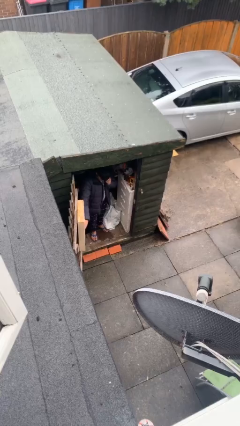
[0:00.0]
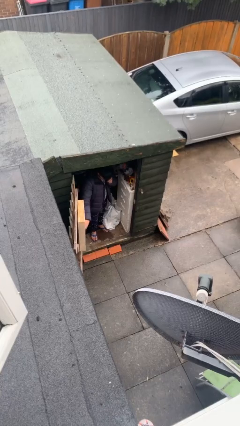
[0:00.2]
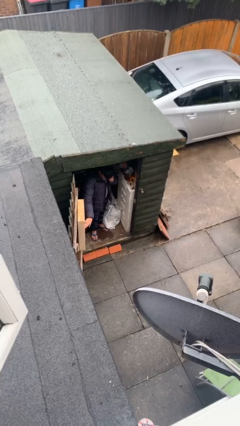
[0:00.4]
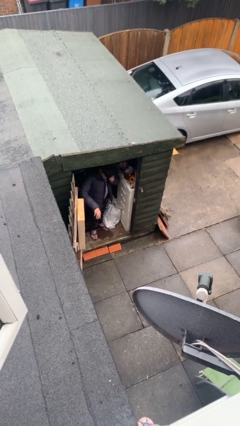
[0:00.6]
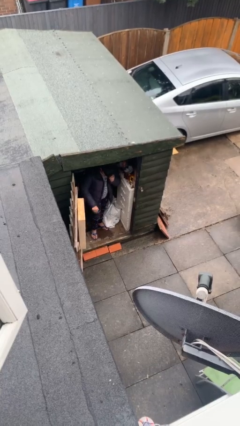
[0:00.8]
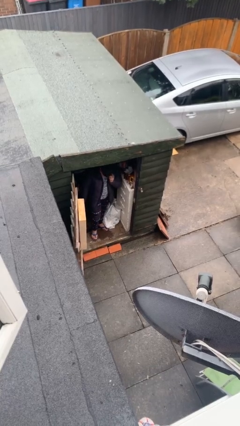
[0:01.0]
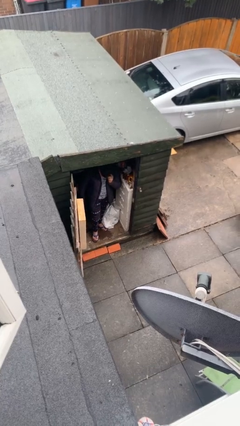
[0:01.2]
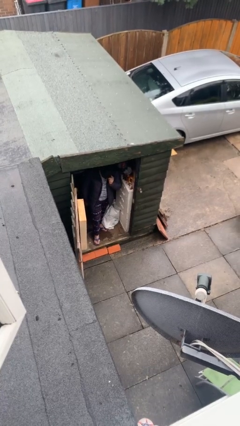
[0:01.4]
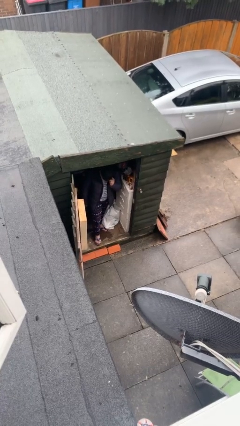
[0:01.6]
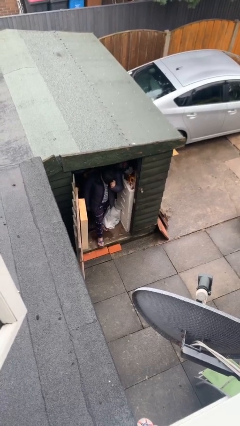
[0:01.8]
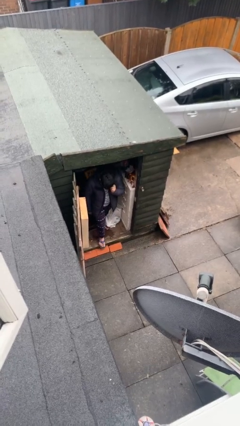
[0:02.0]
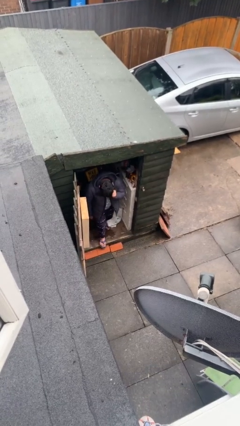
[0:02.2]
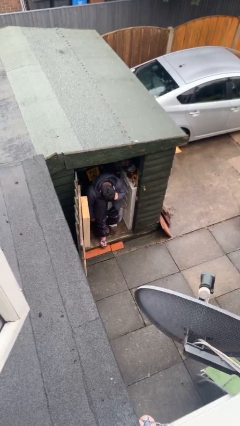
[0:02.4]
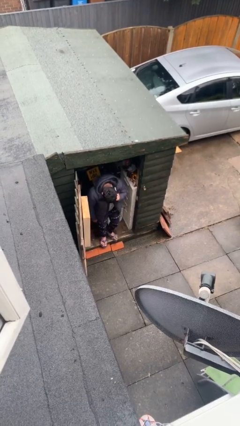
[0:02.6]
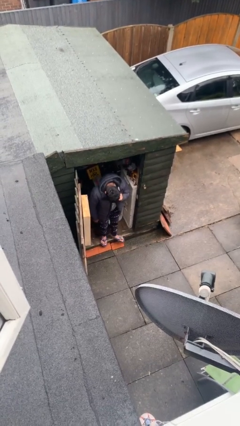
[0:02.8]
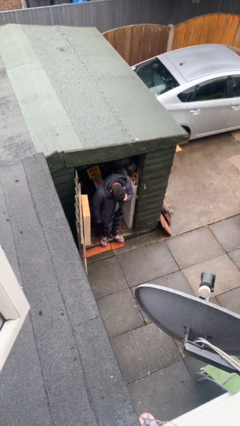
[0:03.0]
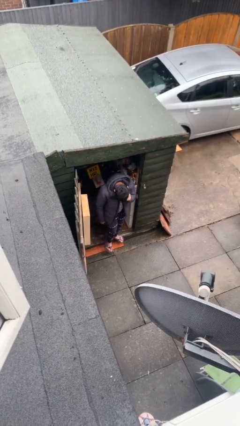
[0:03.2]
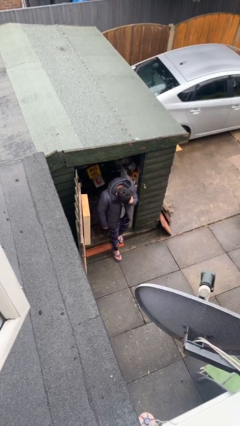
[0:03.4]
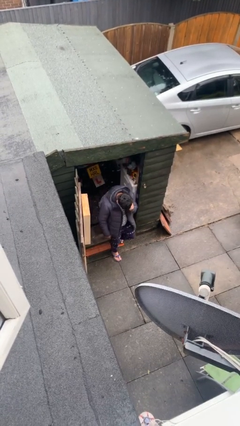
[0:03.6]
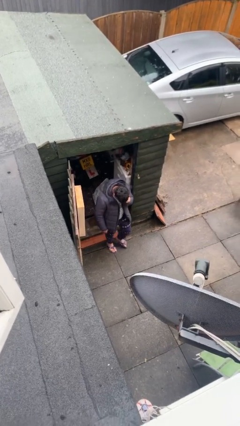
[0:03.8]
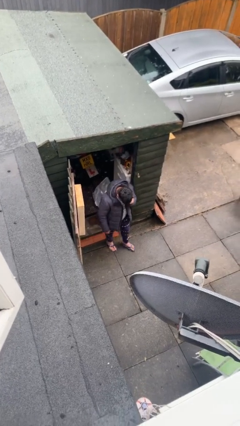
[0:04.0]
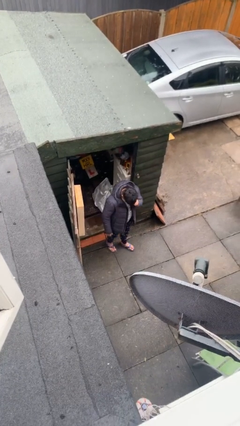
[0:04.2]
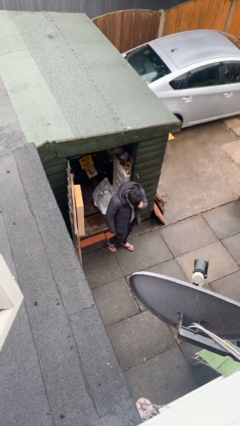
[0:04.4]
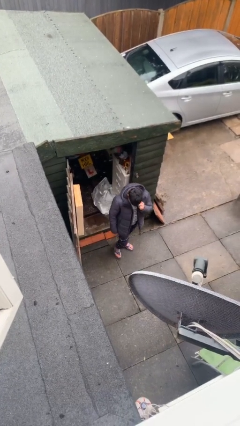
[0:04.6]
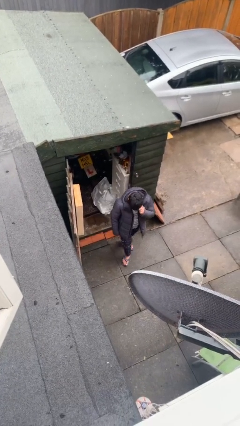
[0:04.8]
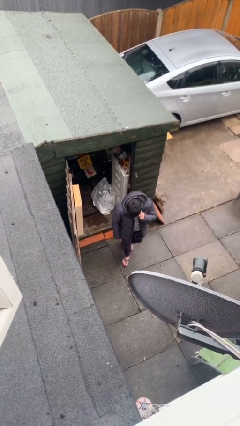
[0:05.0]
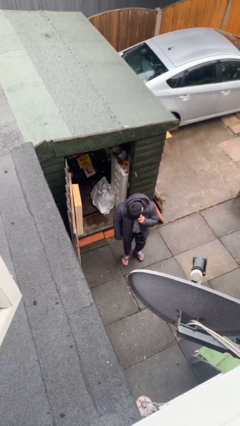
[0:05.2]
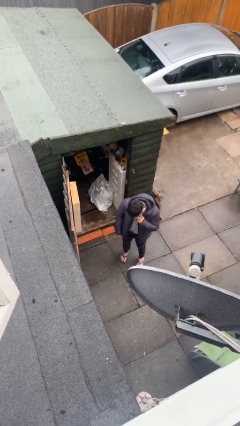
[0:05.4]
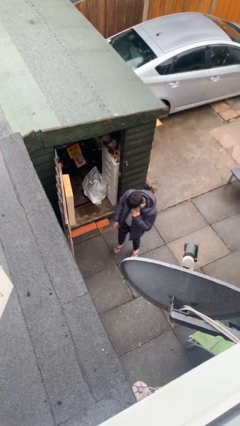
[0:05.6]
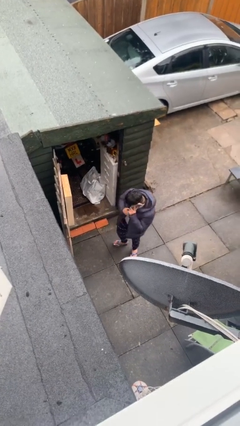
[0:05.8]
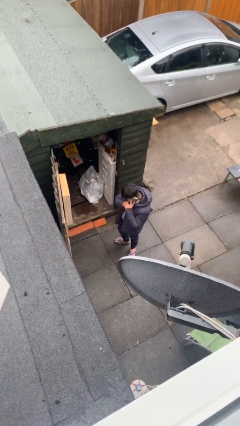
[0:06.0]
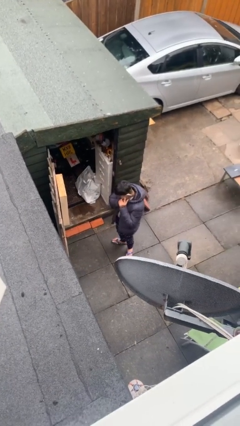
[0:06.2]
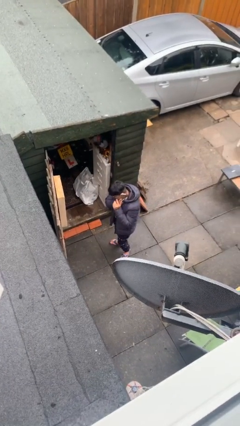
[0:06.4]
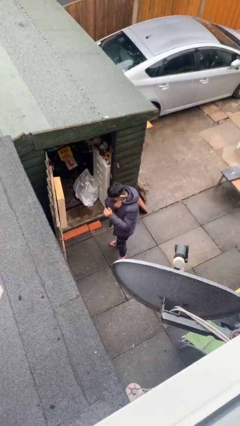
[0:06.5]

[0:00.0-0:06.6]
person enters scene through structure

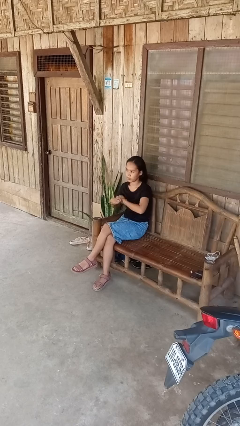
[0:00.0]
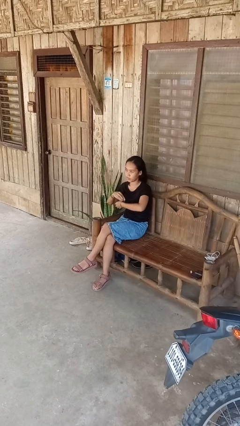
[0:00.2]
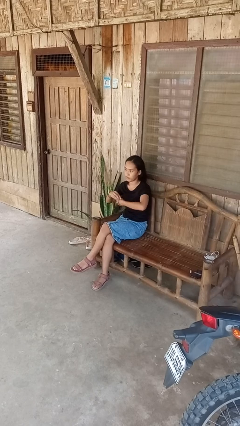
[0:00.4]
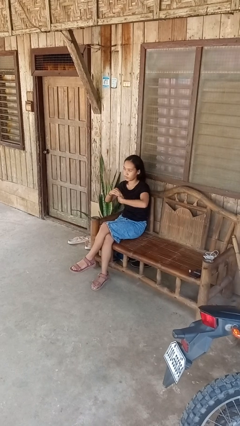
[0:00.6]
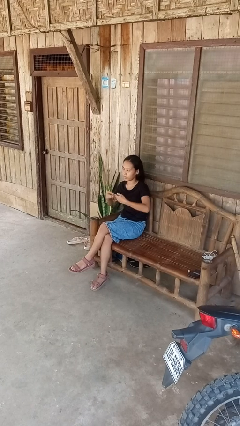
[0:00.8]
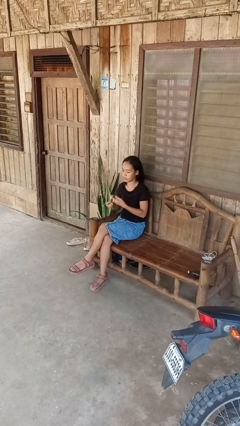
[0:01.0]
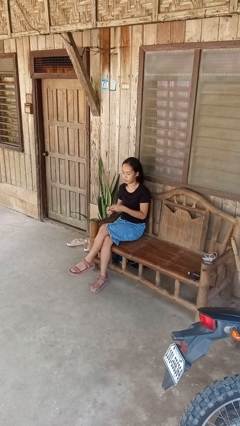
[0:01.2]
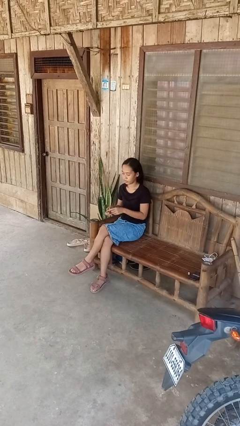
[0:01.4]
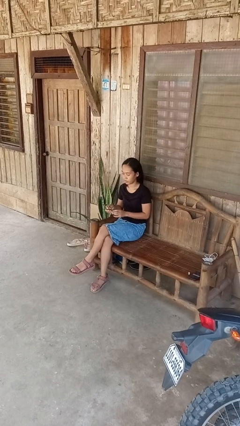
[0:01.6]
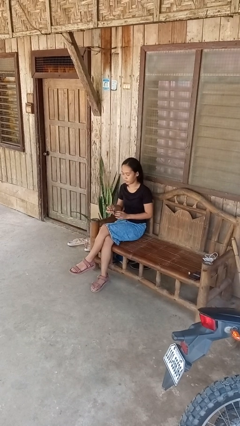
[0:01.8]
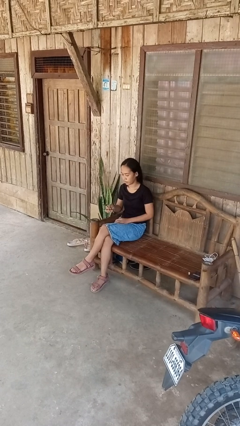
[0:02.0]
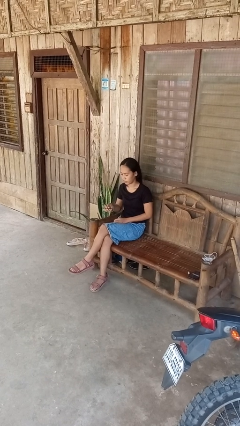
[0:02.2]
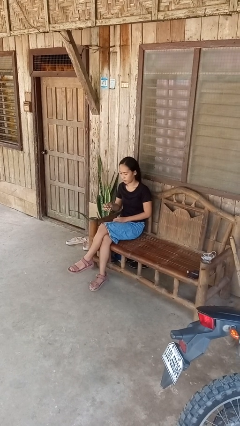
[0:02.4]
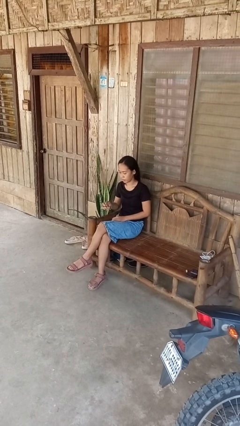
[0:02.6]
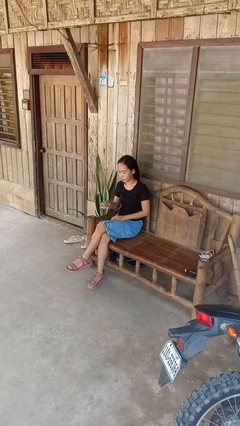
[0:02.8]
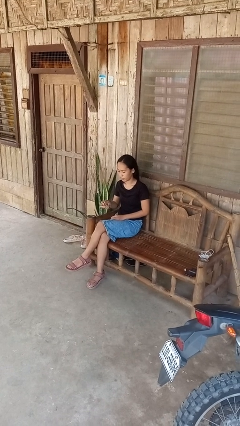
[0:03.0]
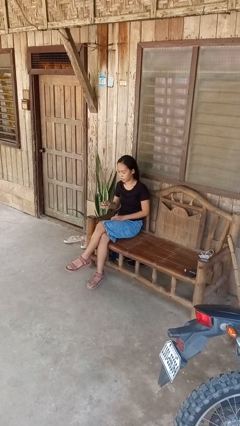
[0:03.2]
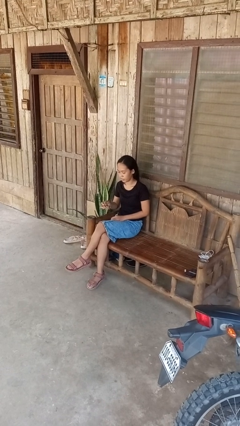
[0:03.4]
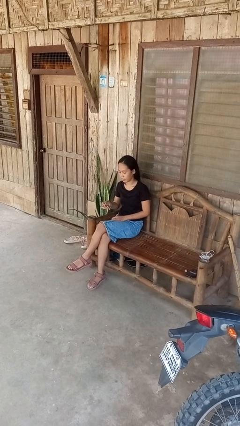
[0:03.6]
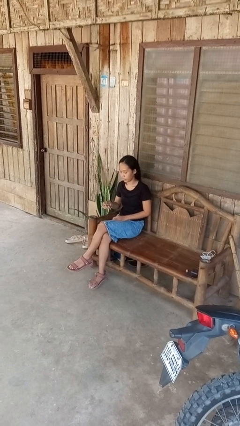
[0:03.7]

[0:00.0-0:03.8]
person takes off wristwatch

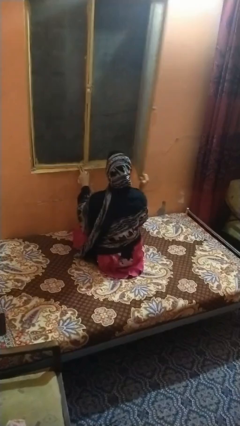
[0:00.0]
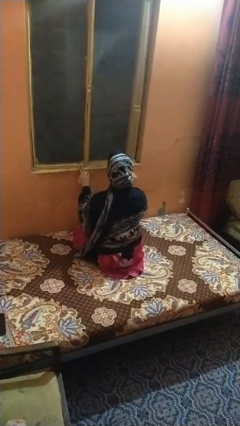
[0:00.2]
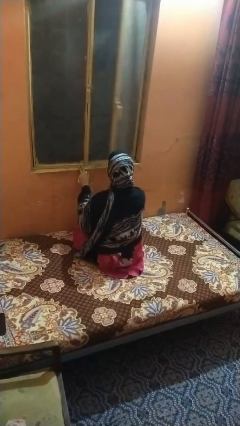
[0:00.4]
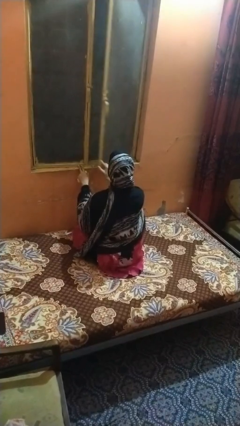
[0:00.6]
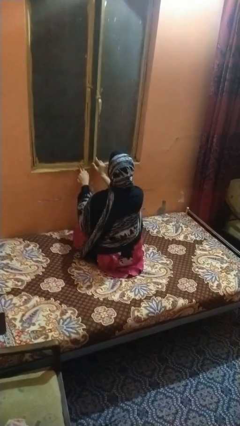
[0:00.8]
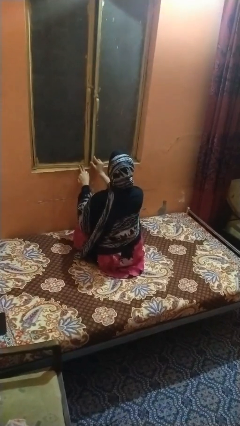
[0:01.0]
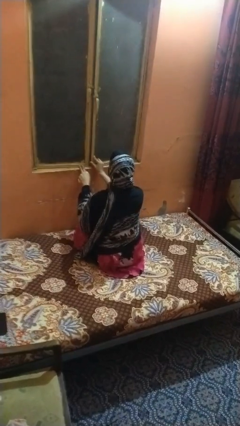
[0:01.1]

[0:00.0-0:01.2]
person closes home window

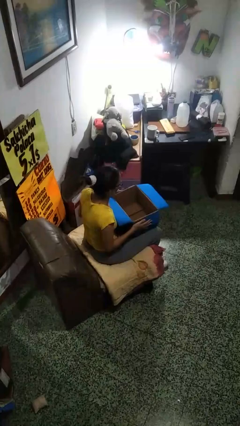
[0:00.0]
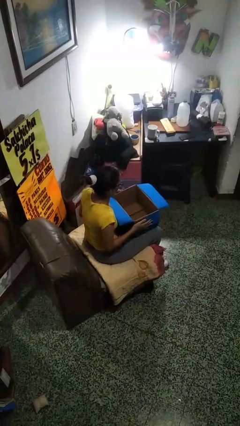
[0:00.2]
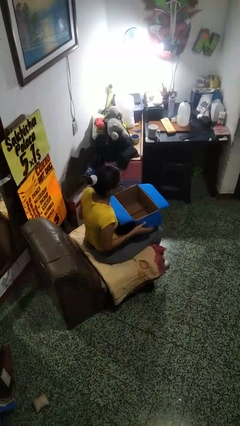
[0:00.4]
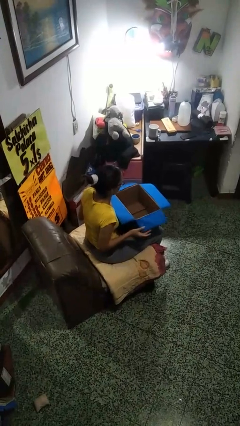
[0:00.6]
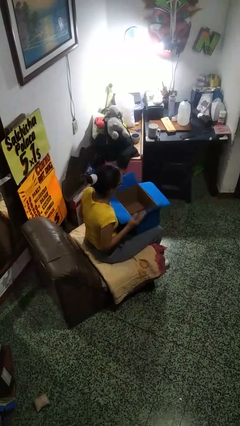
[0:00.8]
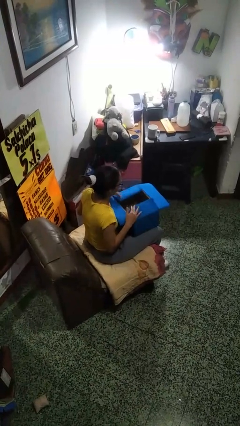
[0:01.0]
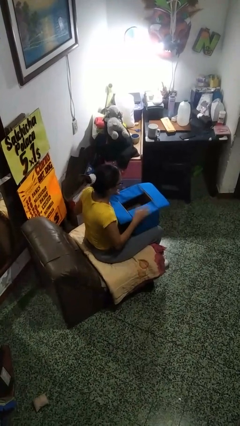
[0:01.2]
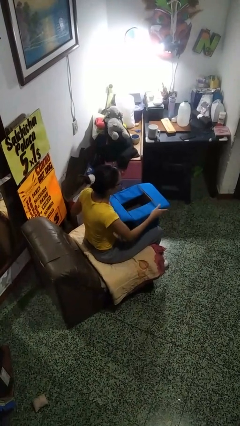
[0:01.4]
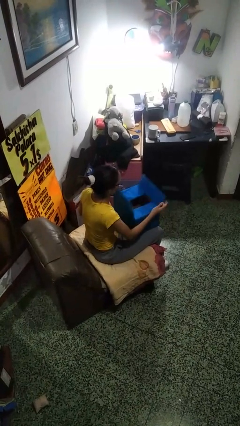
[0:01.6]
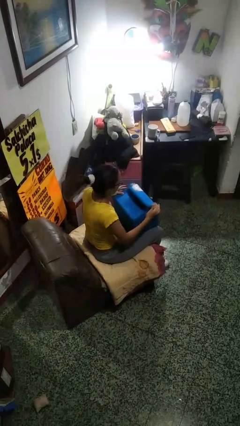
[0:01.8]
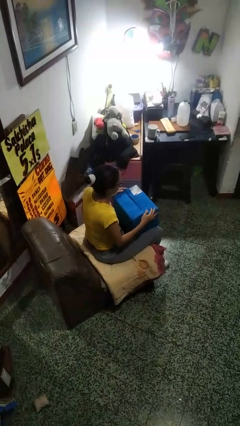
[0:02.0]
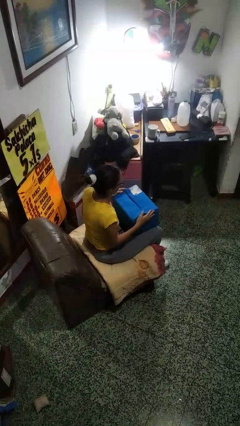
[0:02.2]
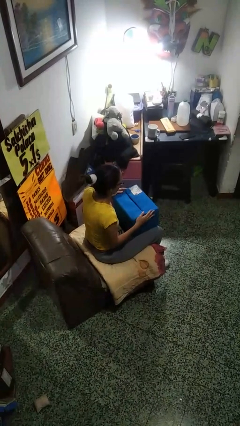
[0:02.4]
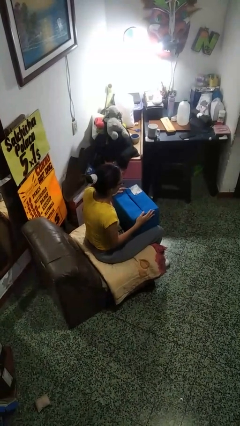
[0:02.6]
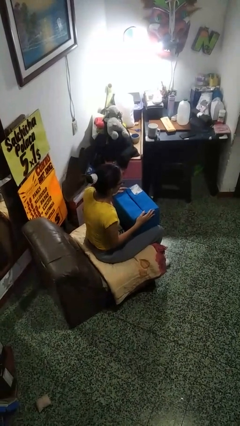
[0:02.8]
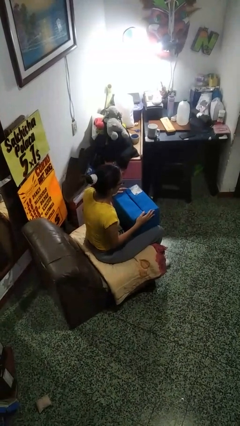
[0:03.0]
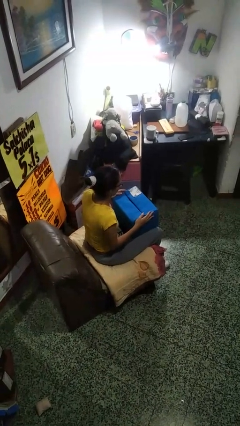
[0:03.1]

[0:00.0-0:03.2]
person closes box

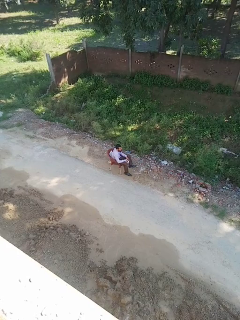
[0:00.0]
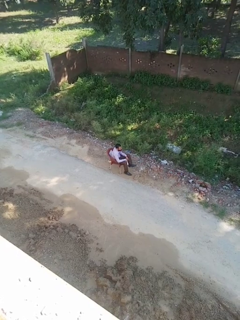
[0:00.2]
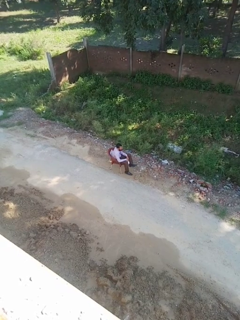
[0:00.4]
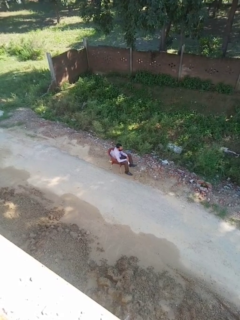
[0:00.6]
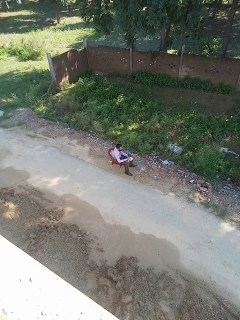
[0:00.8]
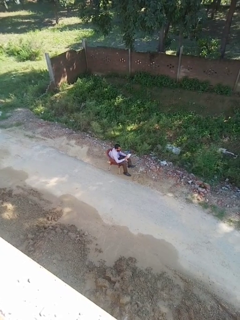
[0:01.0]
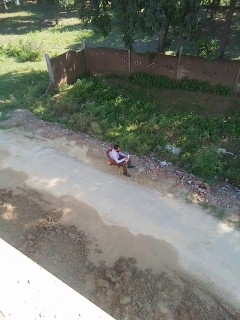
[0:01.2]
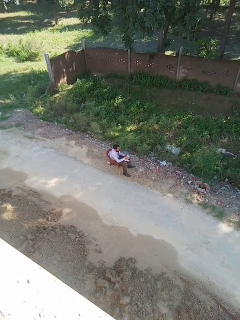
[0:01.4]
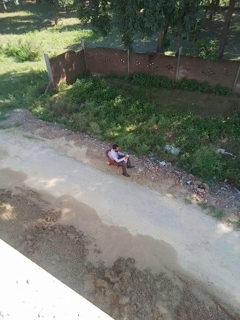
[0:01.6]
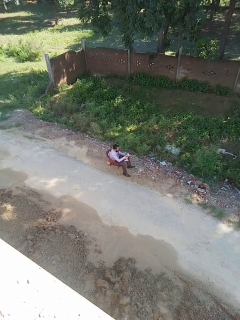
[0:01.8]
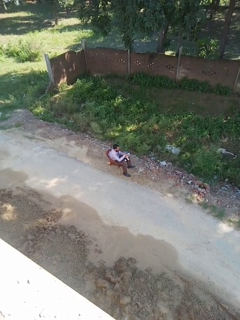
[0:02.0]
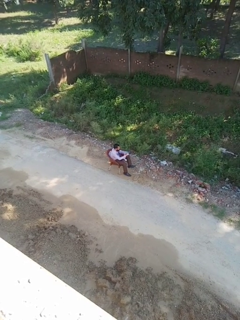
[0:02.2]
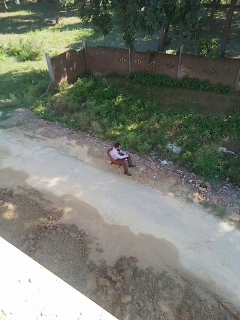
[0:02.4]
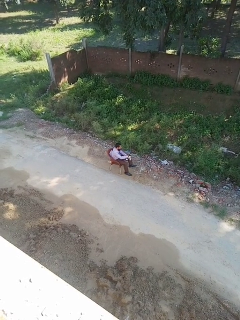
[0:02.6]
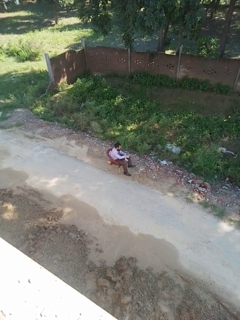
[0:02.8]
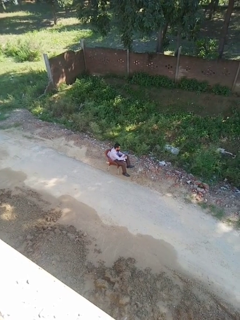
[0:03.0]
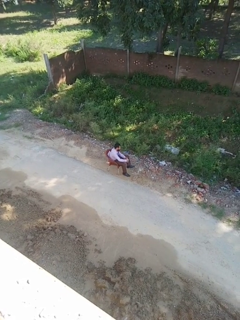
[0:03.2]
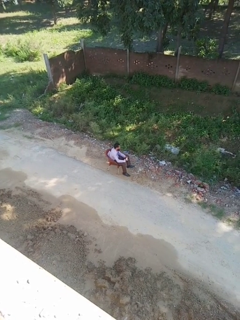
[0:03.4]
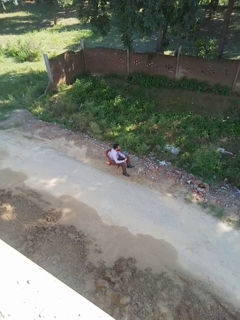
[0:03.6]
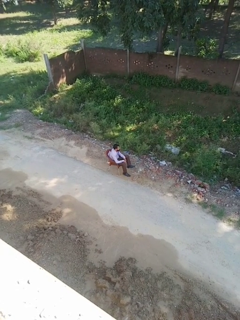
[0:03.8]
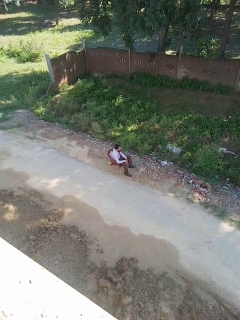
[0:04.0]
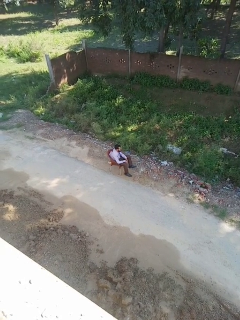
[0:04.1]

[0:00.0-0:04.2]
person squeezes object
